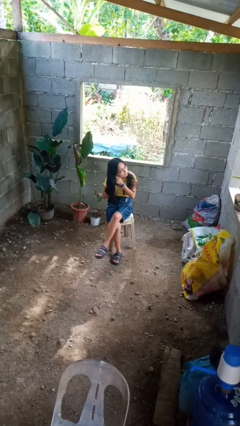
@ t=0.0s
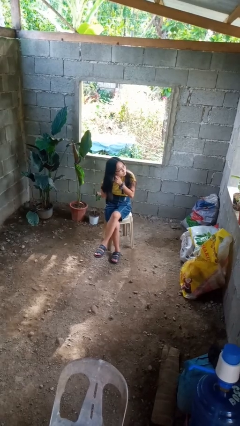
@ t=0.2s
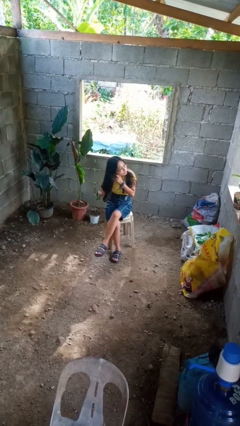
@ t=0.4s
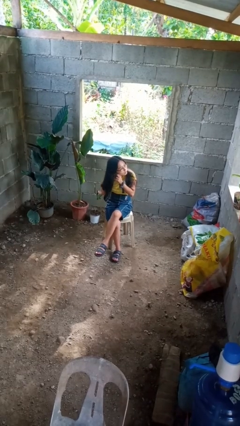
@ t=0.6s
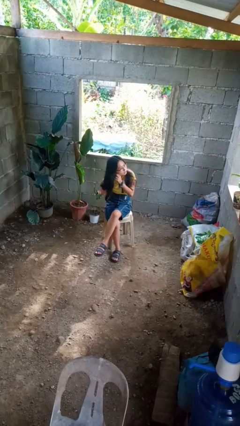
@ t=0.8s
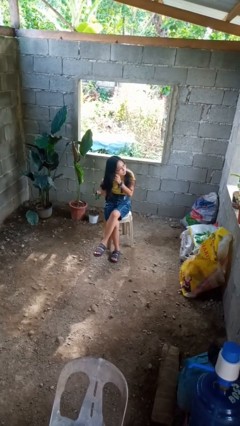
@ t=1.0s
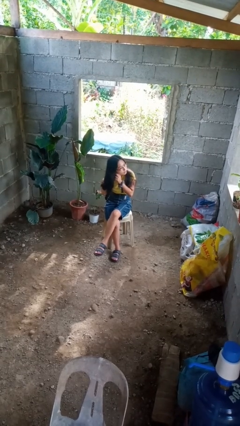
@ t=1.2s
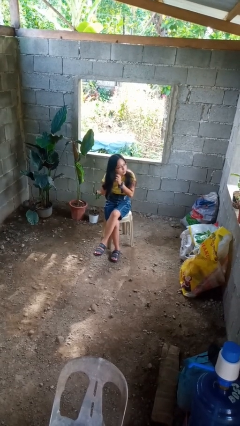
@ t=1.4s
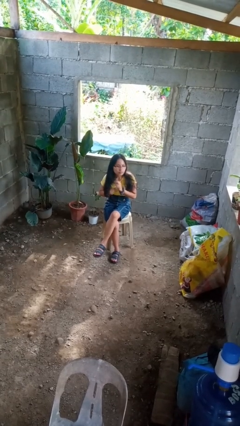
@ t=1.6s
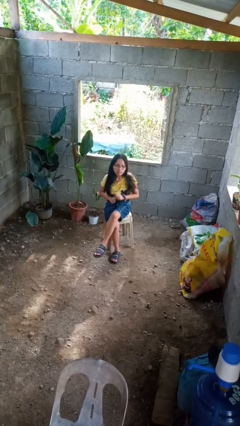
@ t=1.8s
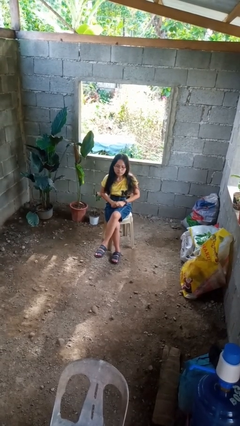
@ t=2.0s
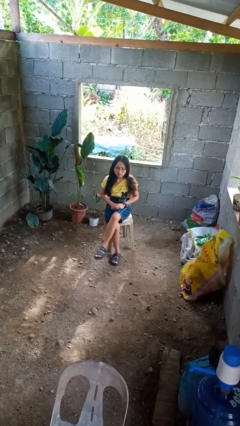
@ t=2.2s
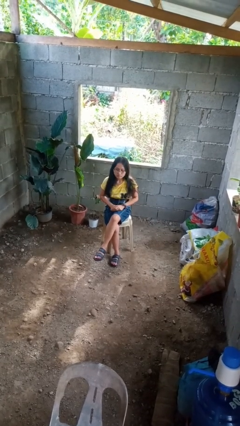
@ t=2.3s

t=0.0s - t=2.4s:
person takes off earrings

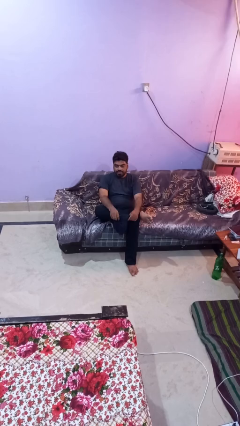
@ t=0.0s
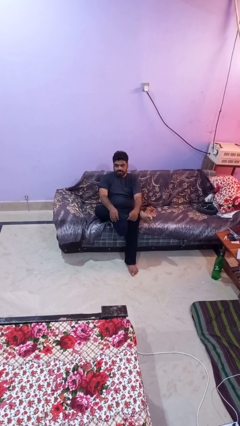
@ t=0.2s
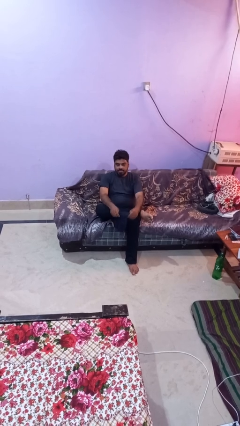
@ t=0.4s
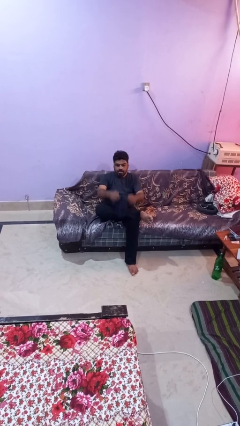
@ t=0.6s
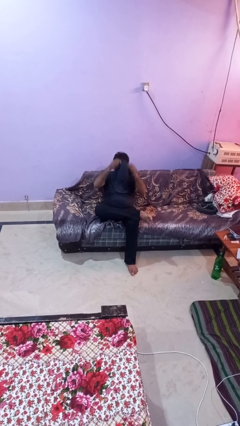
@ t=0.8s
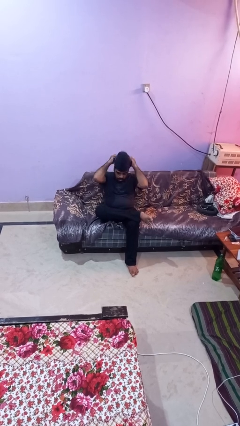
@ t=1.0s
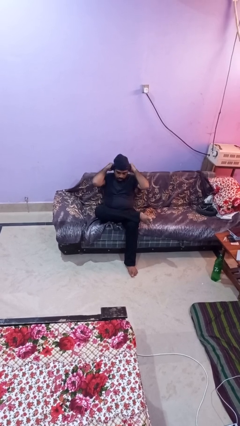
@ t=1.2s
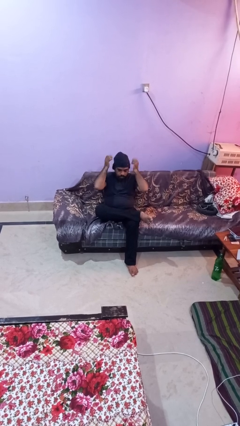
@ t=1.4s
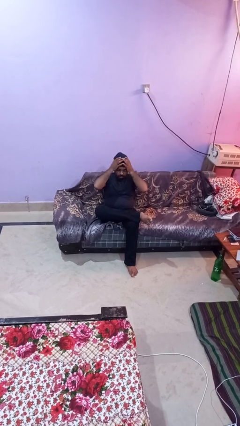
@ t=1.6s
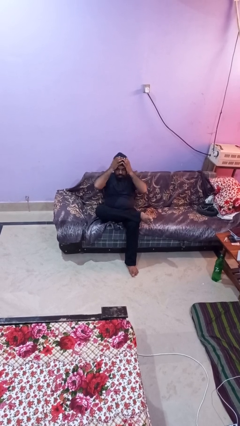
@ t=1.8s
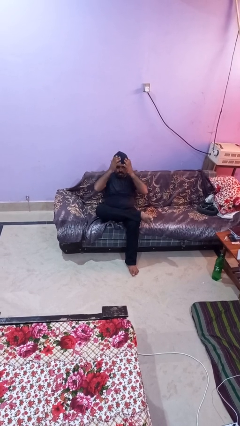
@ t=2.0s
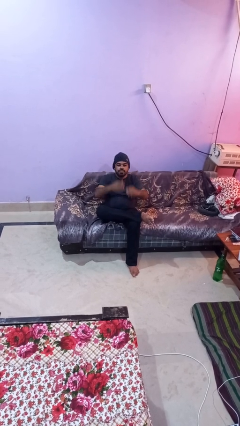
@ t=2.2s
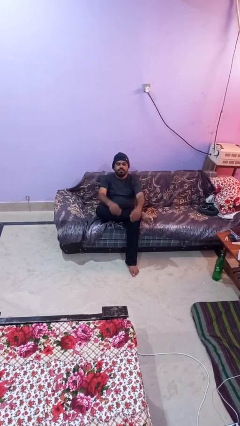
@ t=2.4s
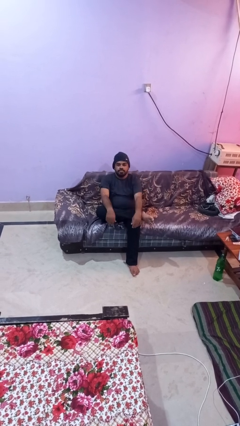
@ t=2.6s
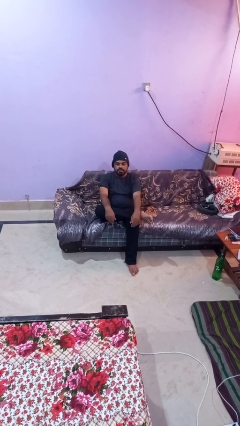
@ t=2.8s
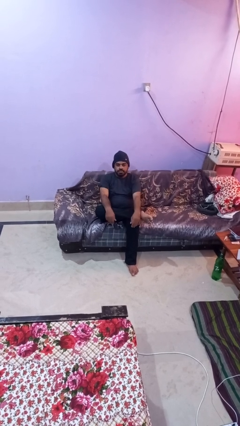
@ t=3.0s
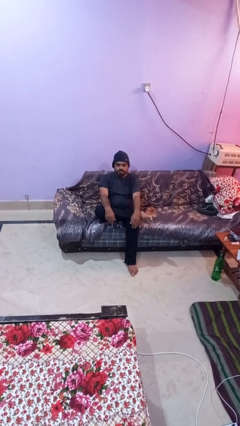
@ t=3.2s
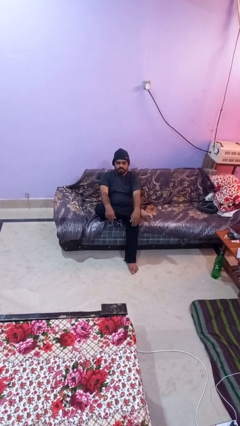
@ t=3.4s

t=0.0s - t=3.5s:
person puts on hat

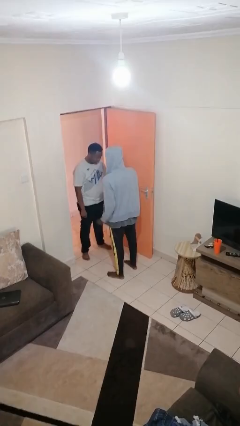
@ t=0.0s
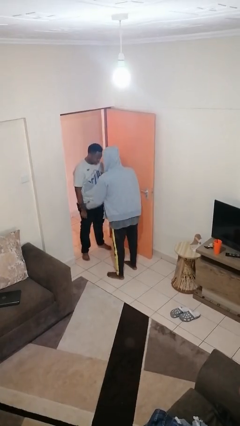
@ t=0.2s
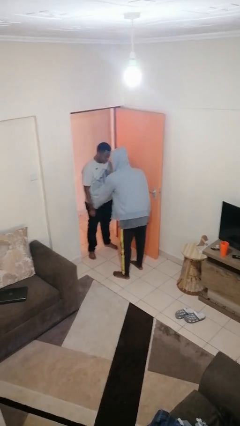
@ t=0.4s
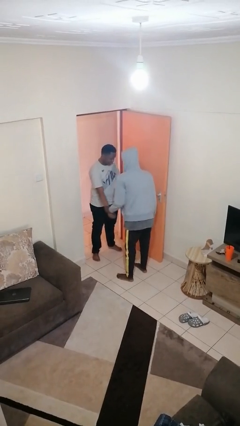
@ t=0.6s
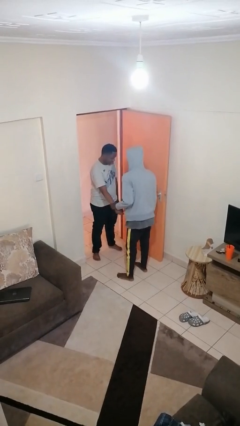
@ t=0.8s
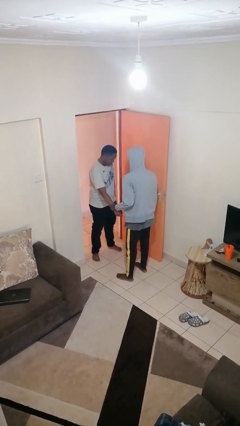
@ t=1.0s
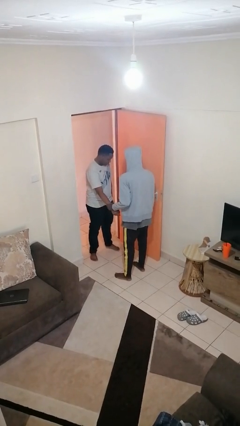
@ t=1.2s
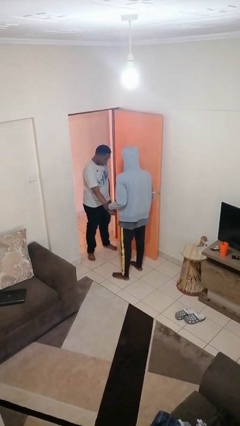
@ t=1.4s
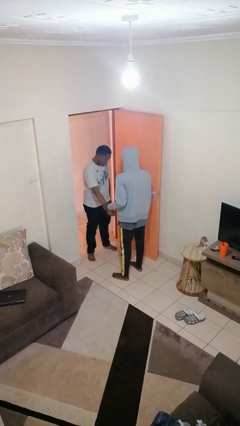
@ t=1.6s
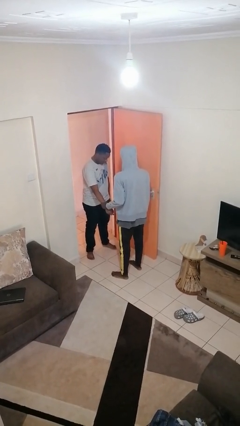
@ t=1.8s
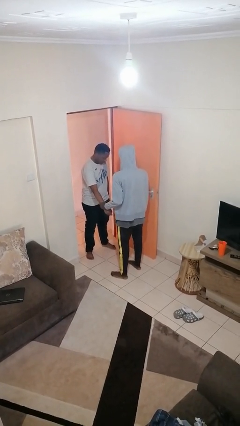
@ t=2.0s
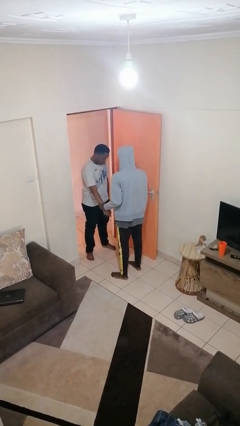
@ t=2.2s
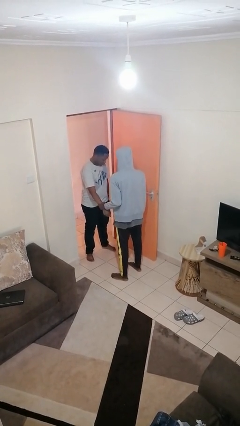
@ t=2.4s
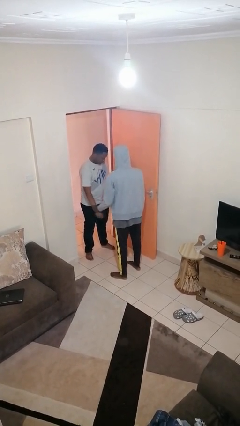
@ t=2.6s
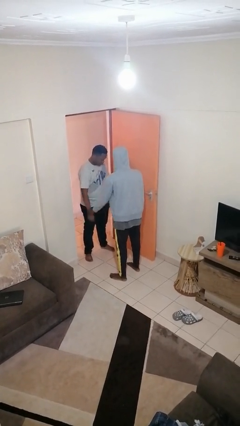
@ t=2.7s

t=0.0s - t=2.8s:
person grabs person by forearm

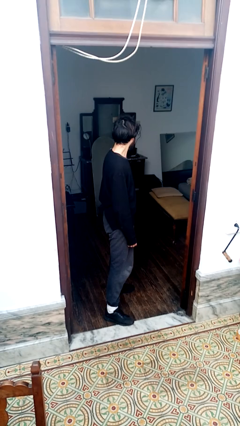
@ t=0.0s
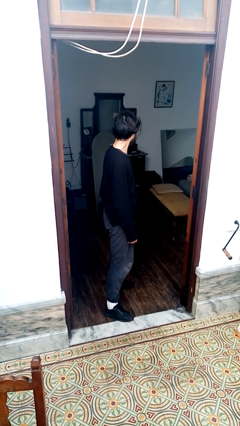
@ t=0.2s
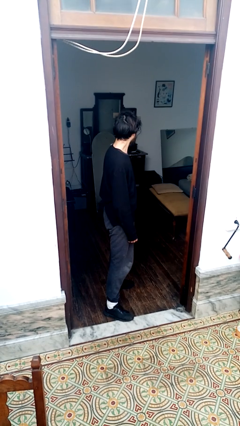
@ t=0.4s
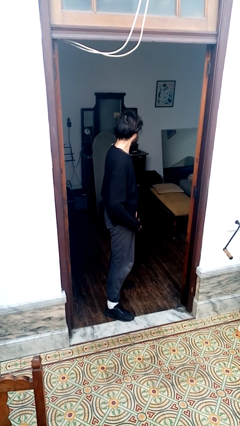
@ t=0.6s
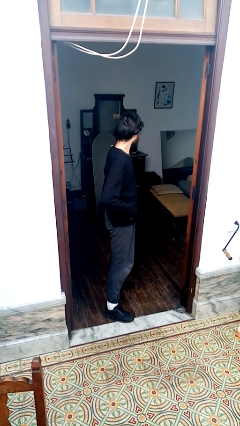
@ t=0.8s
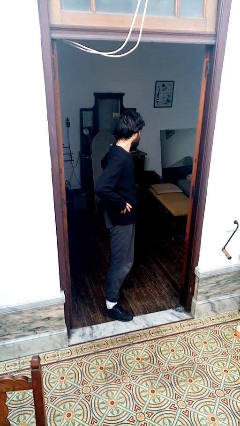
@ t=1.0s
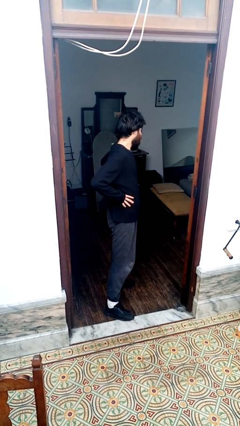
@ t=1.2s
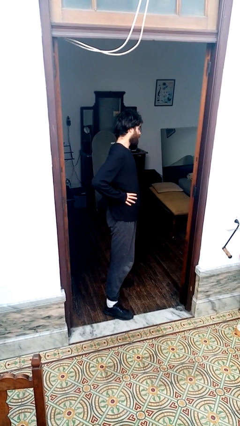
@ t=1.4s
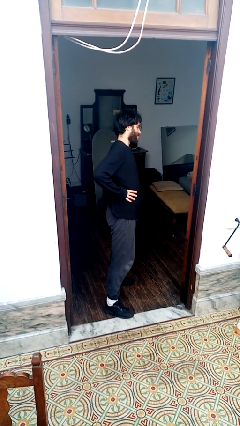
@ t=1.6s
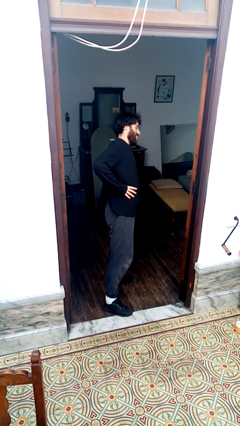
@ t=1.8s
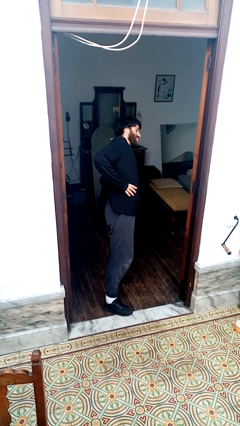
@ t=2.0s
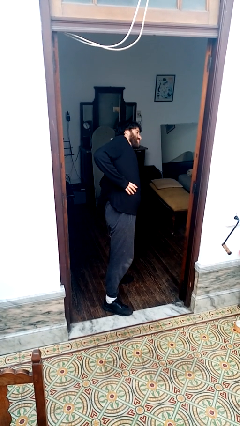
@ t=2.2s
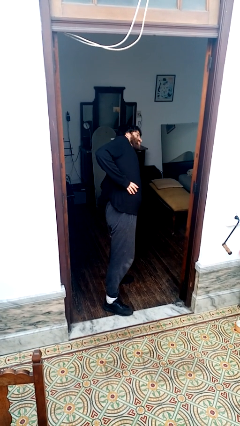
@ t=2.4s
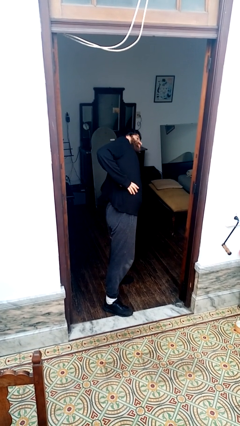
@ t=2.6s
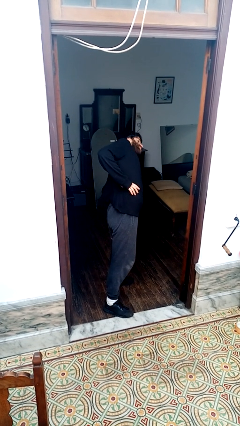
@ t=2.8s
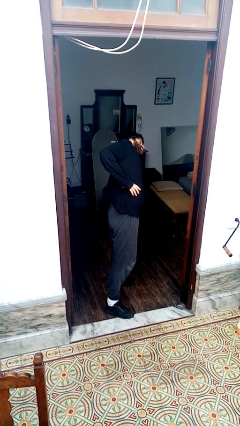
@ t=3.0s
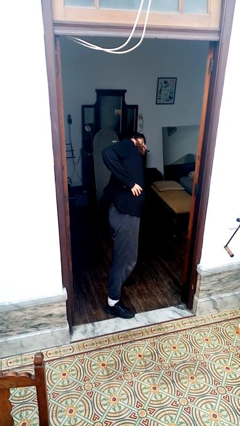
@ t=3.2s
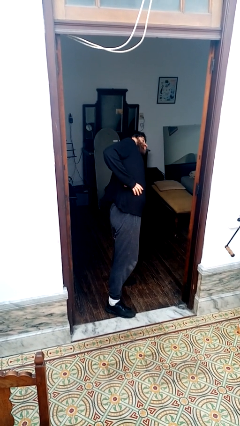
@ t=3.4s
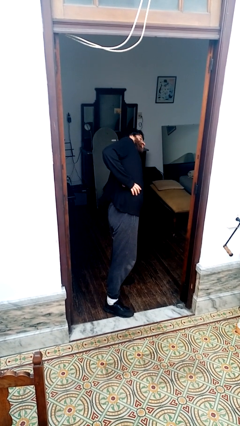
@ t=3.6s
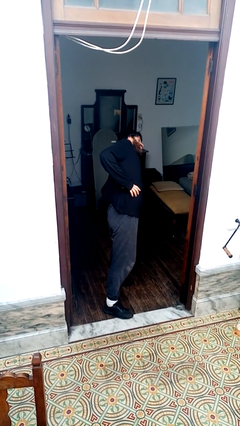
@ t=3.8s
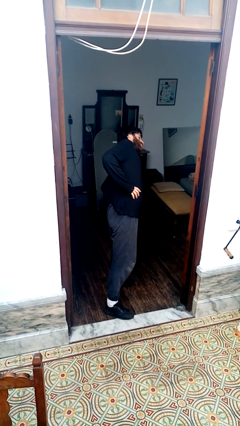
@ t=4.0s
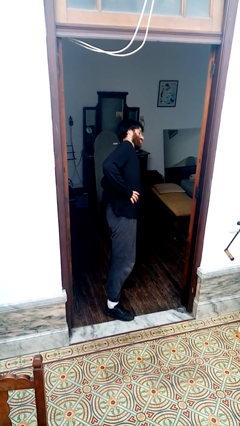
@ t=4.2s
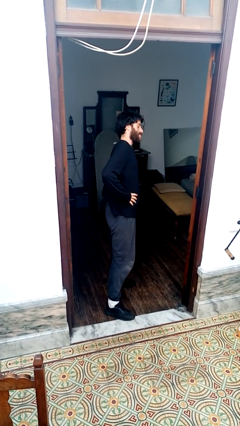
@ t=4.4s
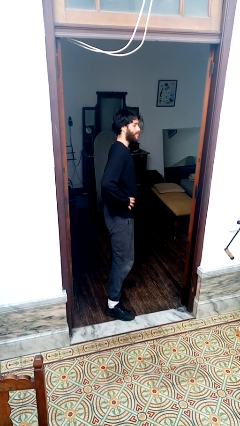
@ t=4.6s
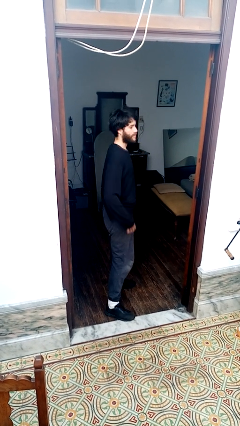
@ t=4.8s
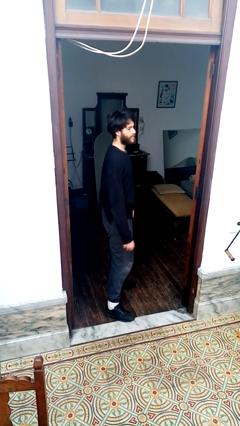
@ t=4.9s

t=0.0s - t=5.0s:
person stretches arms to side

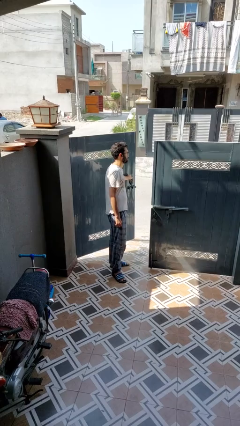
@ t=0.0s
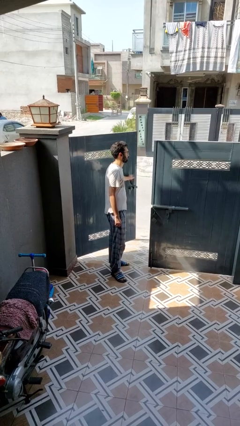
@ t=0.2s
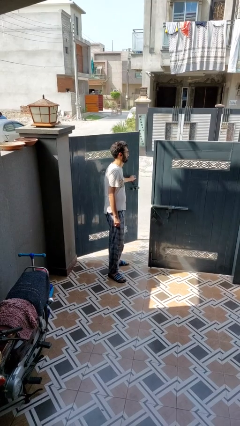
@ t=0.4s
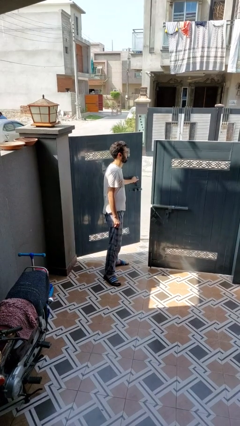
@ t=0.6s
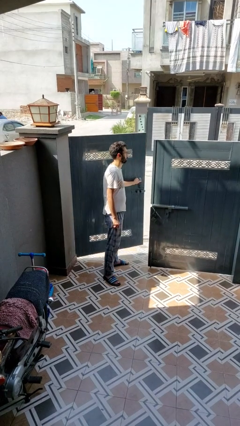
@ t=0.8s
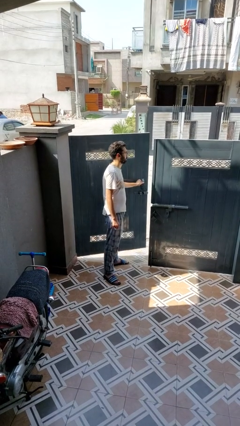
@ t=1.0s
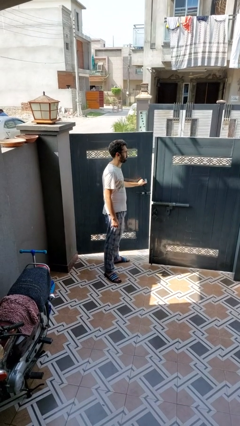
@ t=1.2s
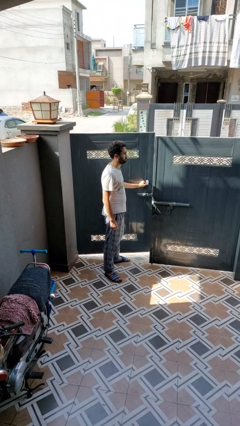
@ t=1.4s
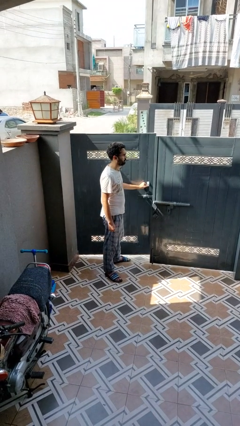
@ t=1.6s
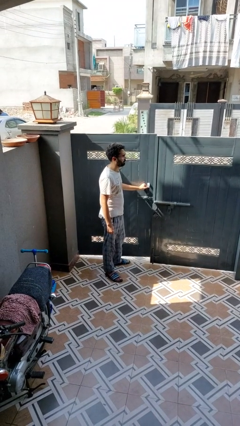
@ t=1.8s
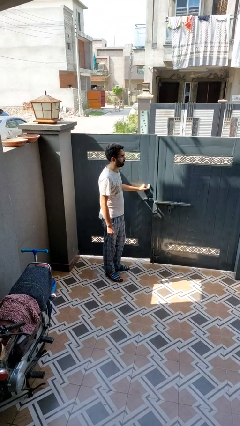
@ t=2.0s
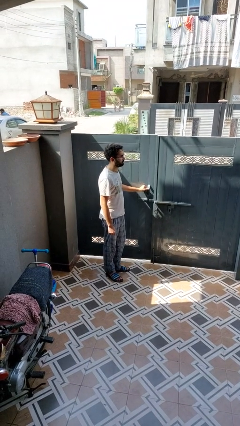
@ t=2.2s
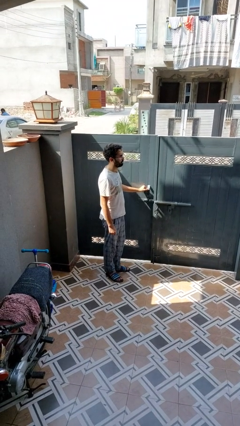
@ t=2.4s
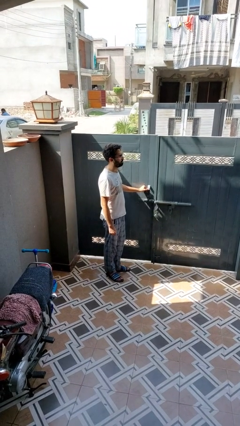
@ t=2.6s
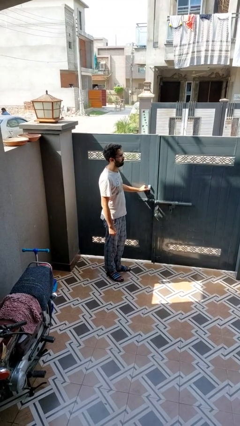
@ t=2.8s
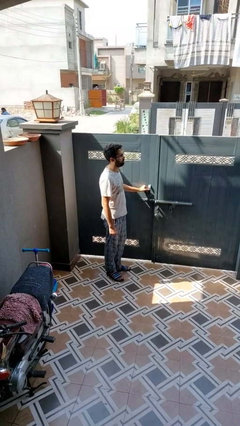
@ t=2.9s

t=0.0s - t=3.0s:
person closes gate

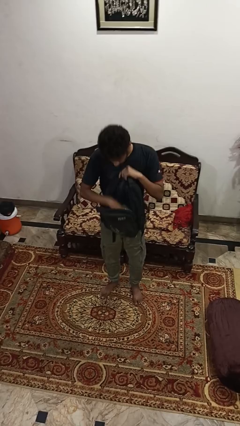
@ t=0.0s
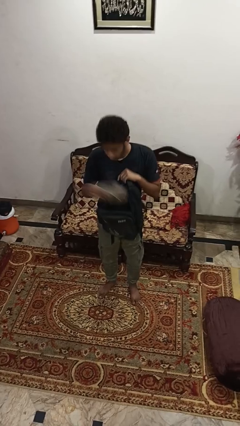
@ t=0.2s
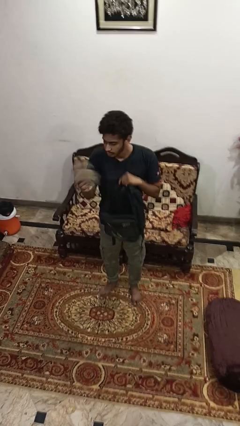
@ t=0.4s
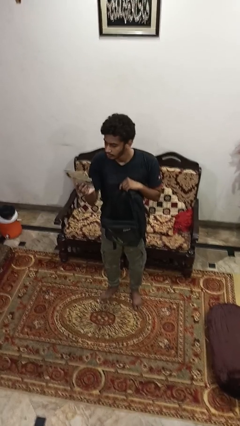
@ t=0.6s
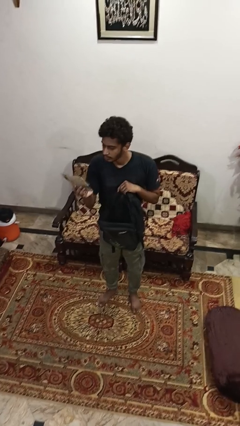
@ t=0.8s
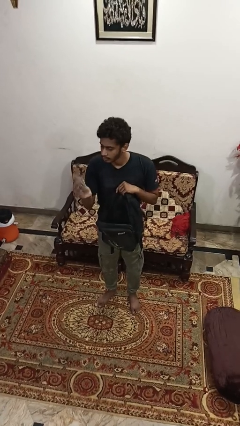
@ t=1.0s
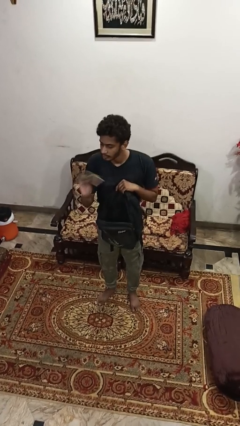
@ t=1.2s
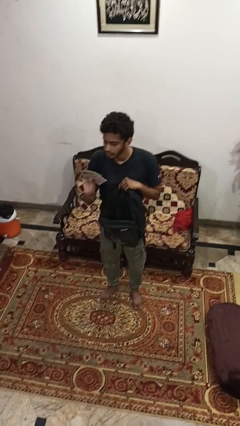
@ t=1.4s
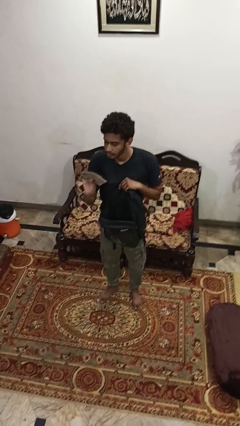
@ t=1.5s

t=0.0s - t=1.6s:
person takes object from backpack
